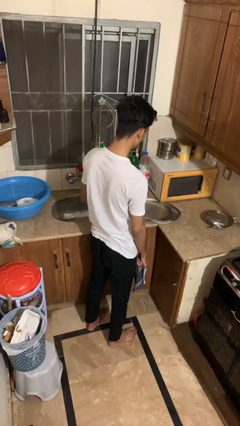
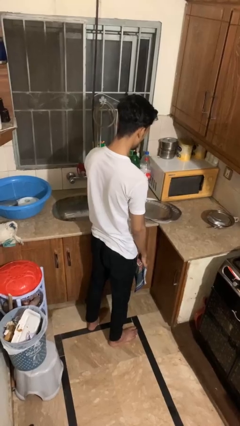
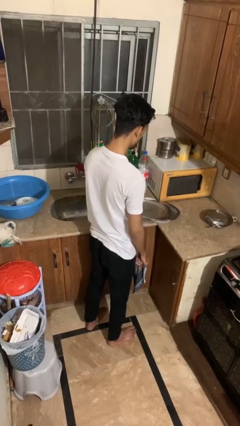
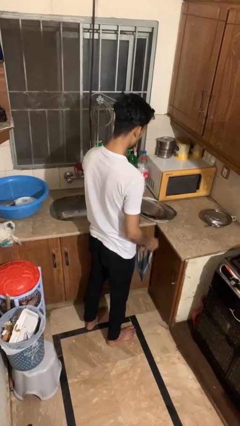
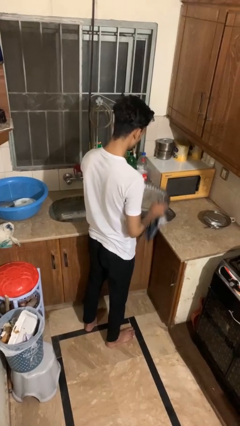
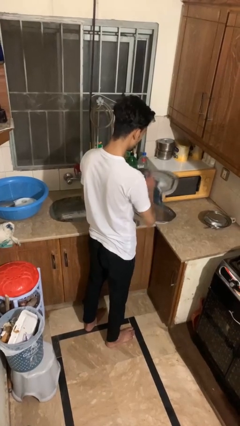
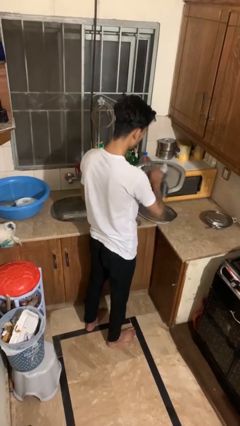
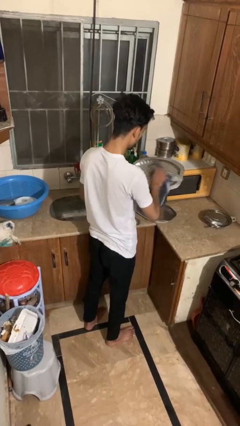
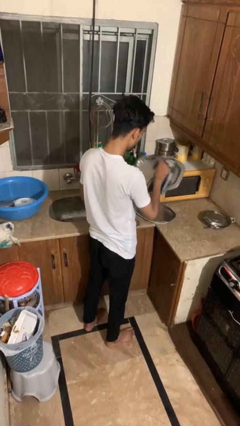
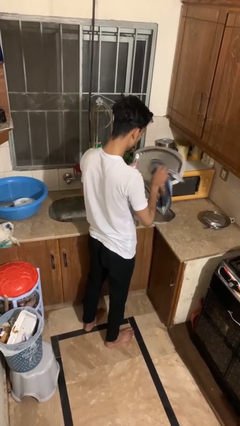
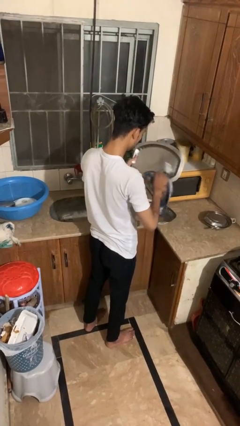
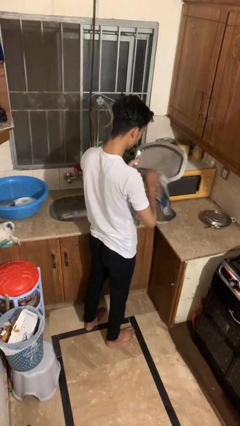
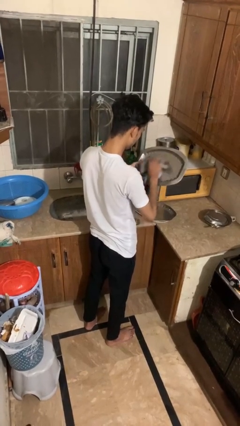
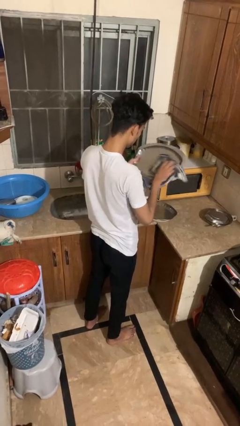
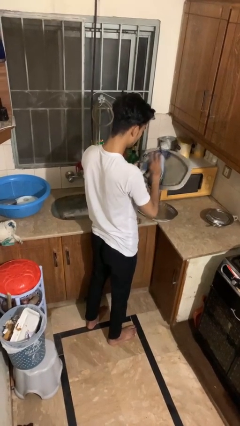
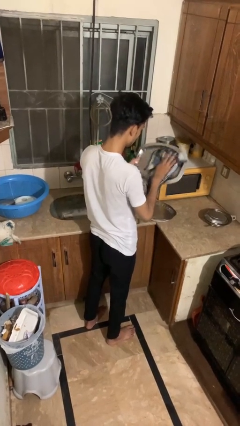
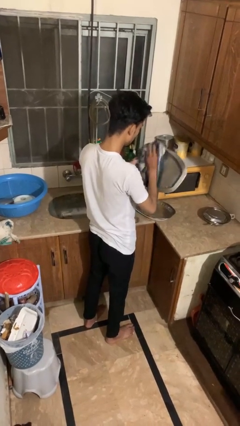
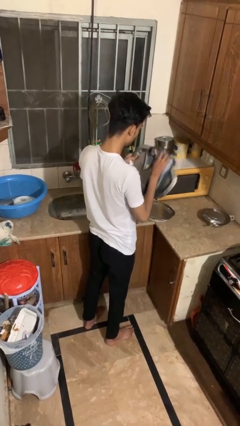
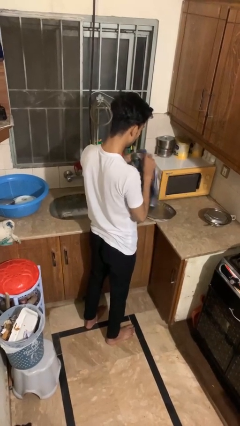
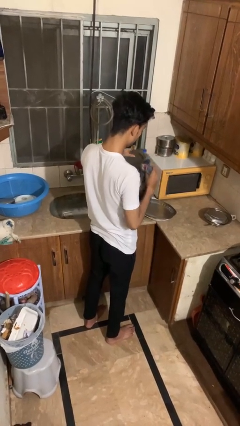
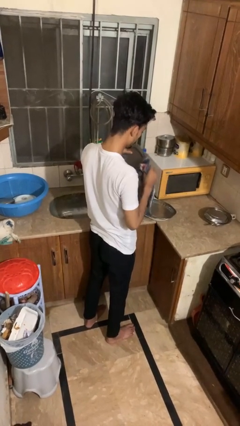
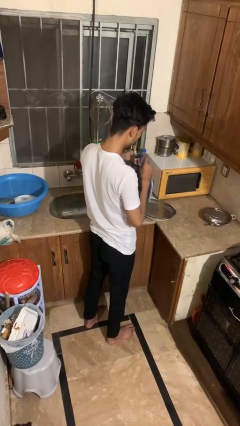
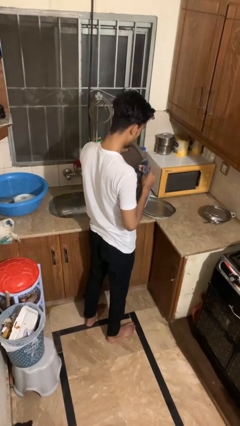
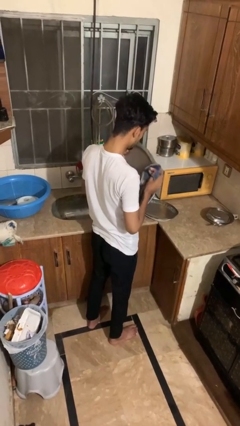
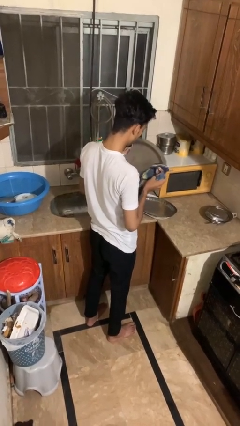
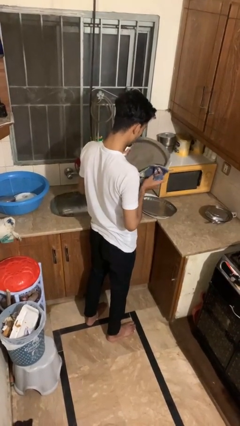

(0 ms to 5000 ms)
person dries dish

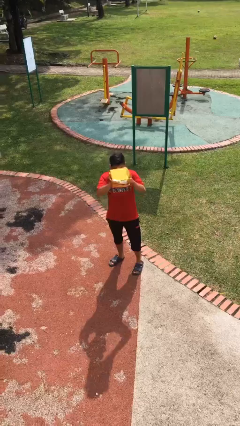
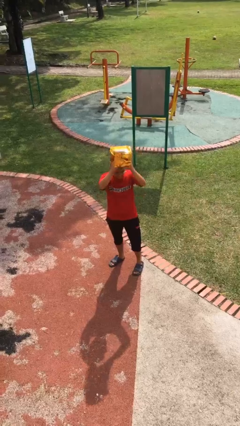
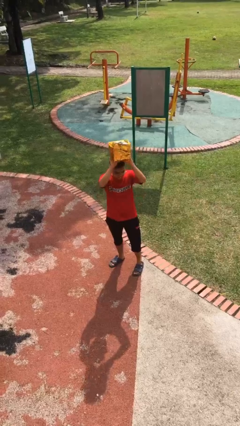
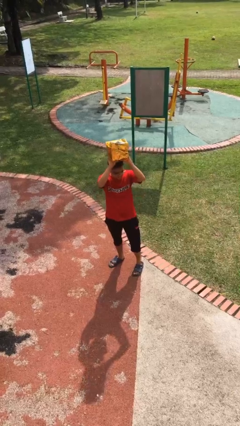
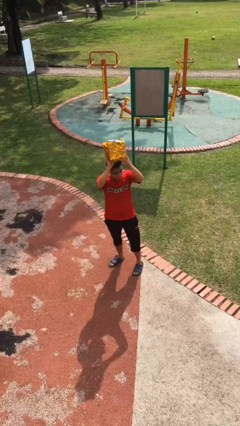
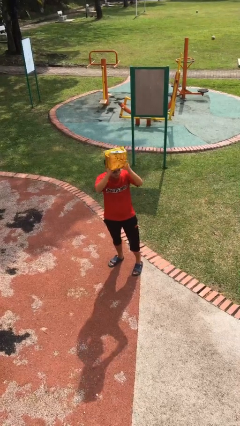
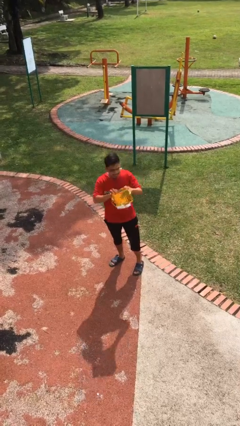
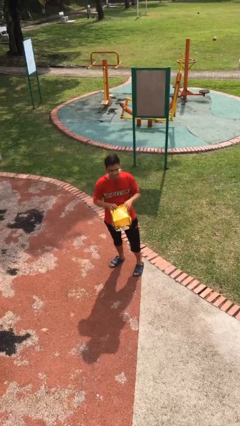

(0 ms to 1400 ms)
person holds object above head

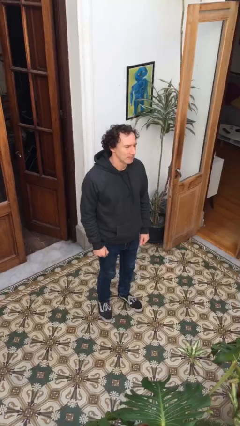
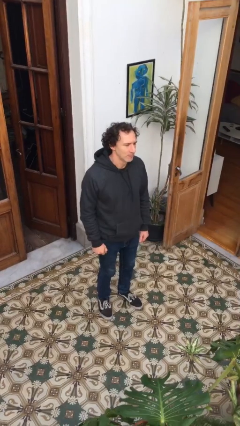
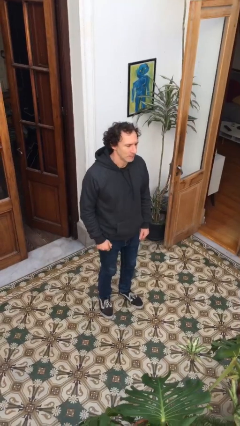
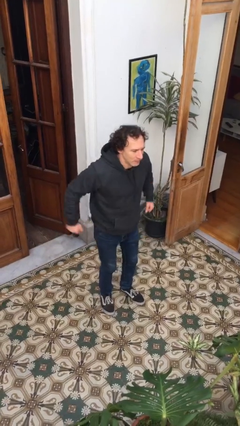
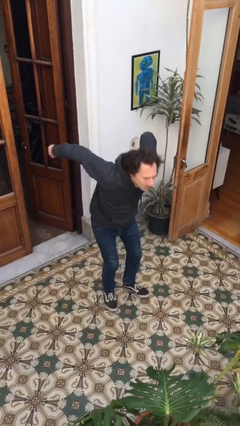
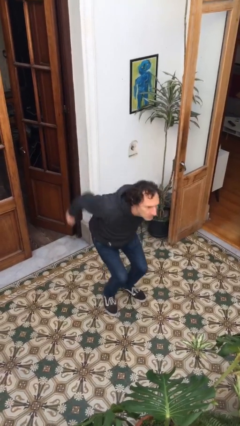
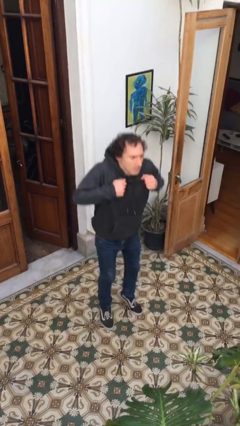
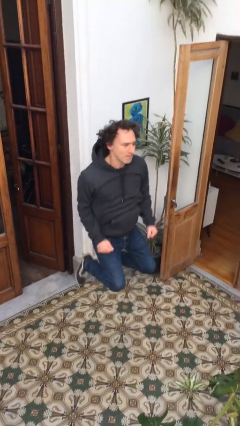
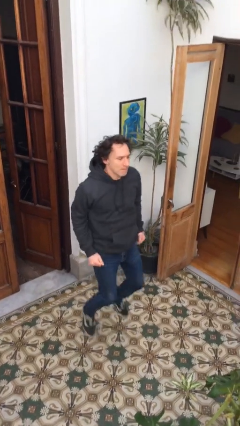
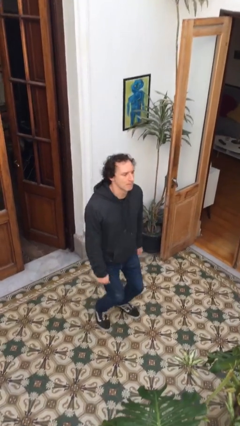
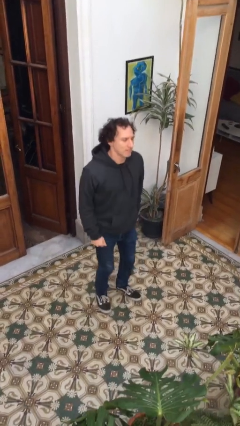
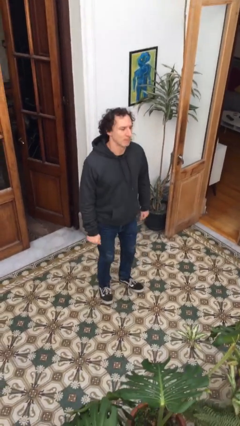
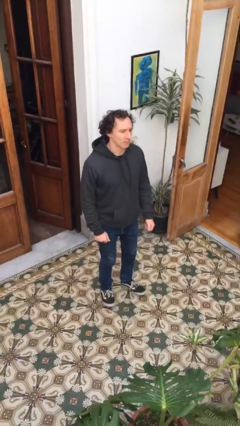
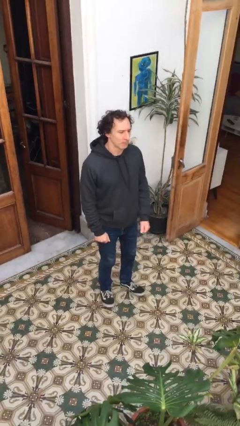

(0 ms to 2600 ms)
person jumps

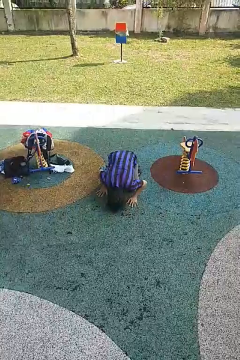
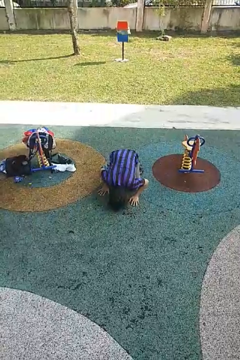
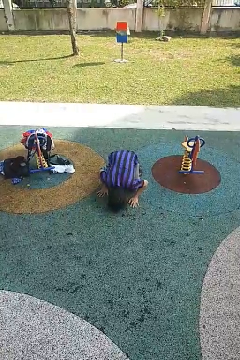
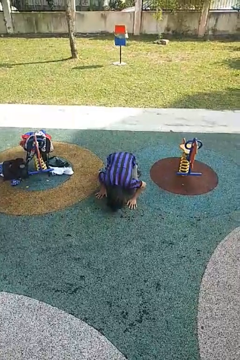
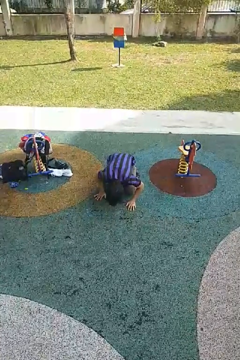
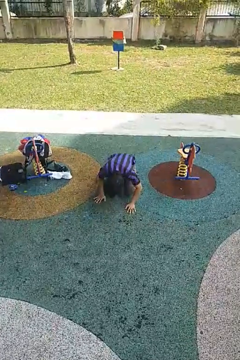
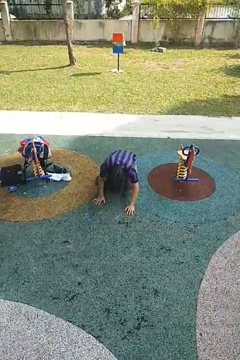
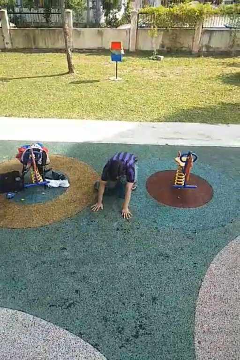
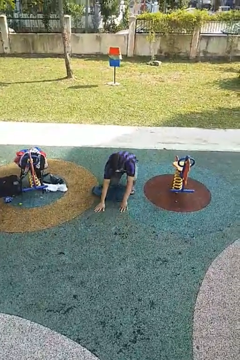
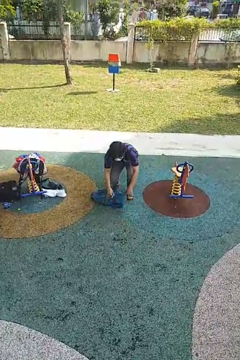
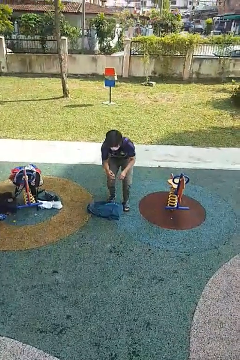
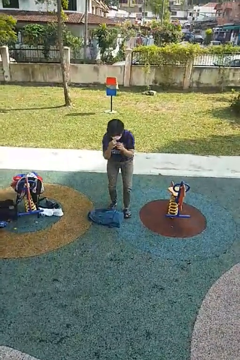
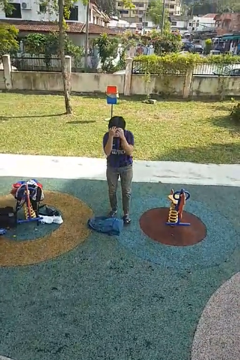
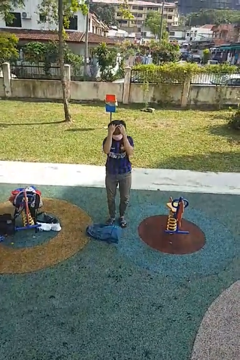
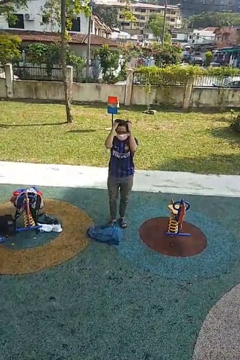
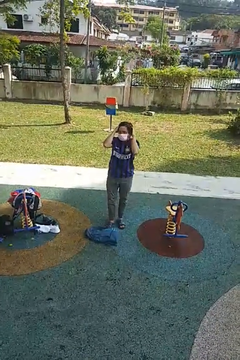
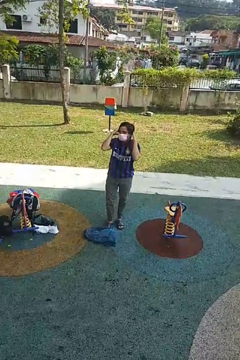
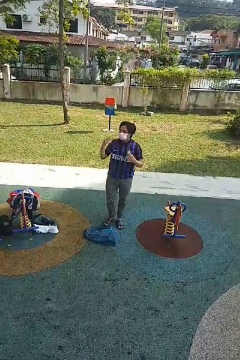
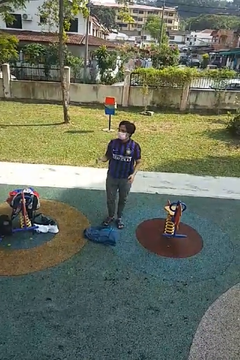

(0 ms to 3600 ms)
person stands up from floor

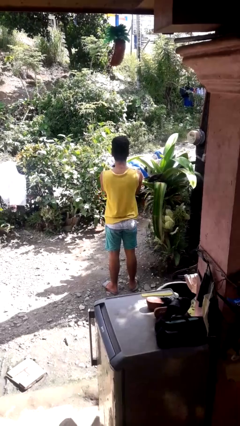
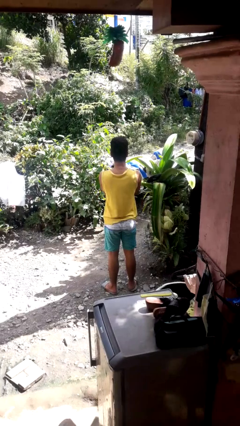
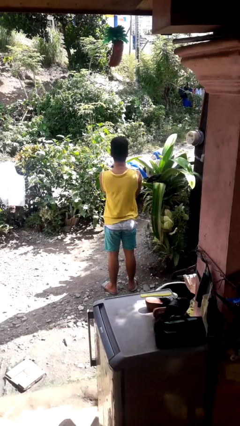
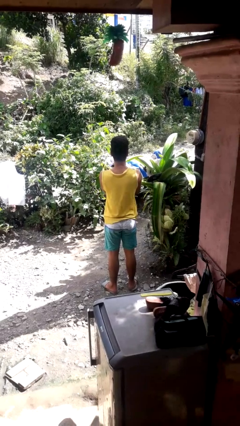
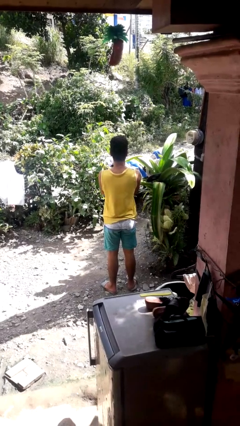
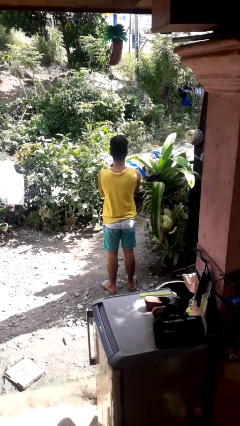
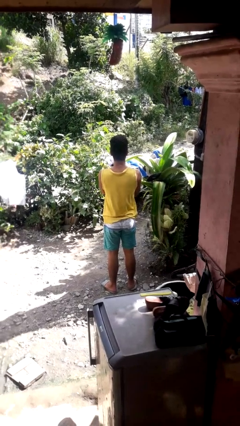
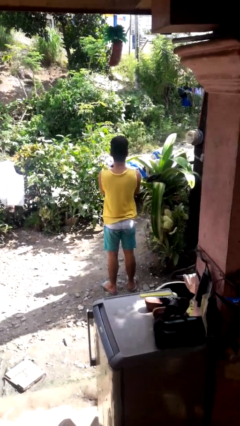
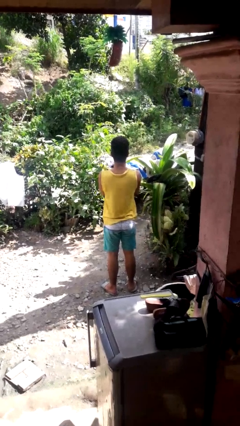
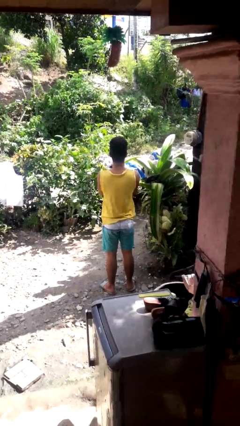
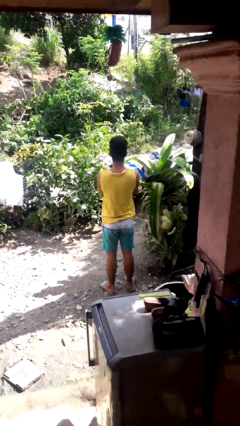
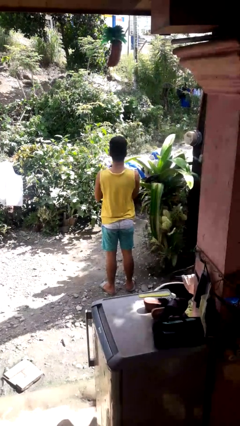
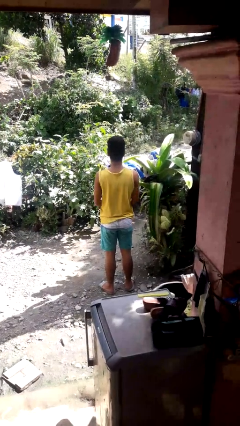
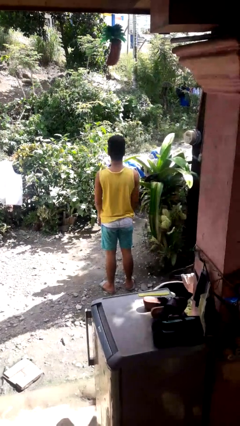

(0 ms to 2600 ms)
person blows into hands

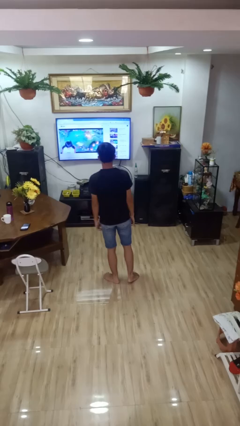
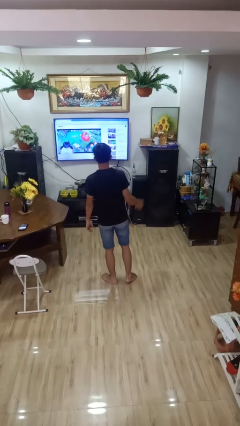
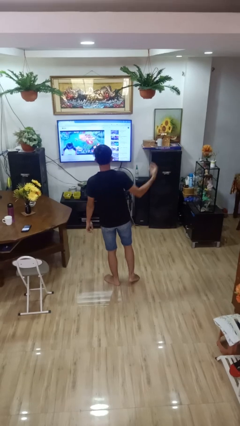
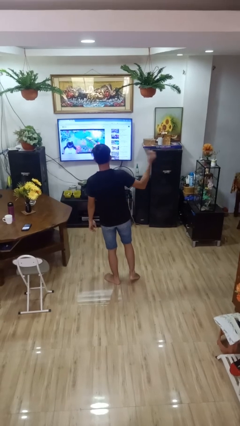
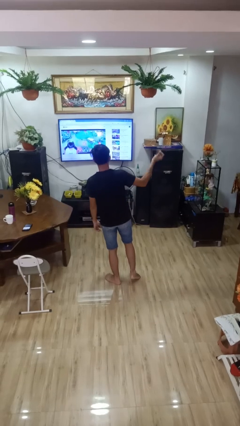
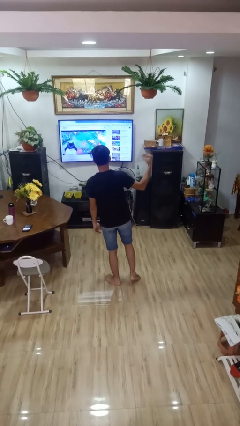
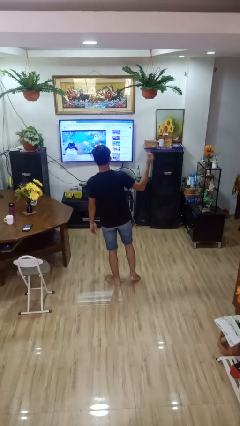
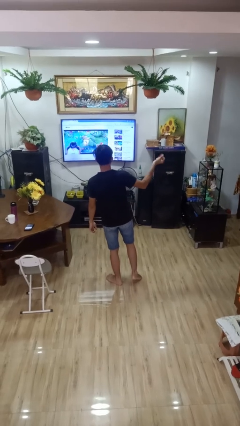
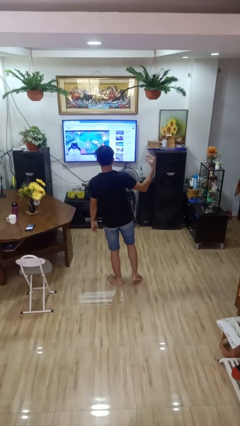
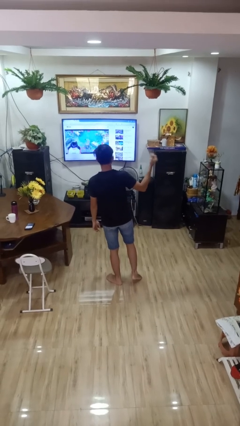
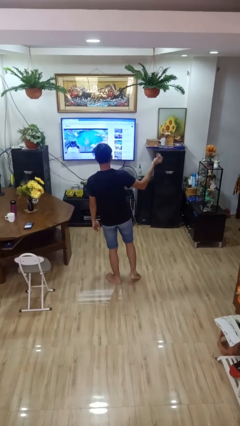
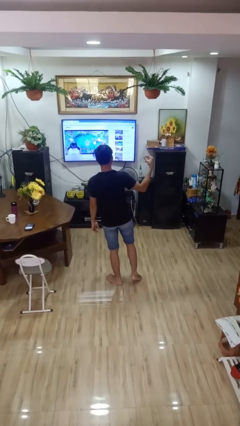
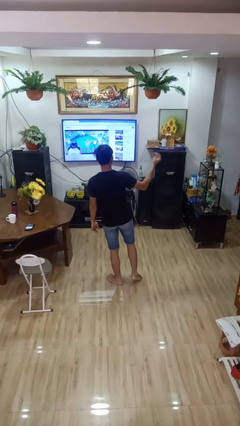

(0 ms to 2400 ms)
person snaps fingers

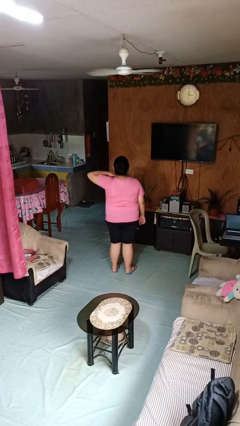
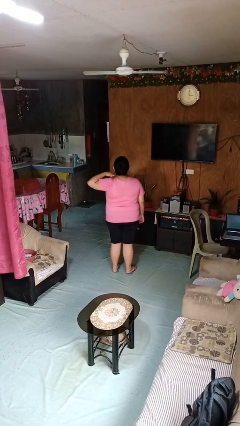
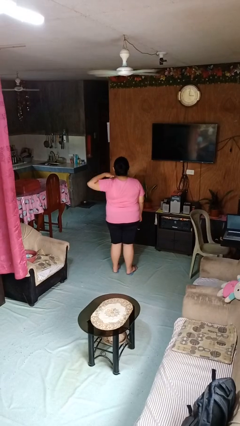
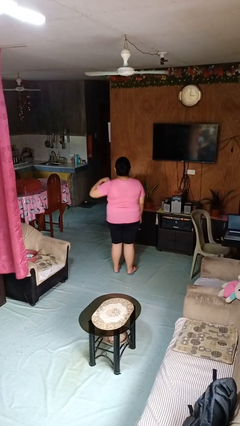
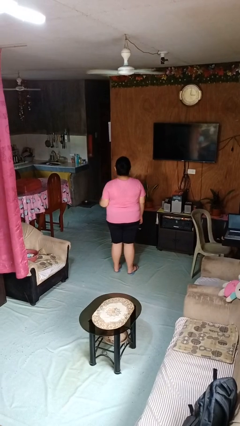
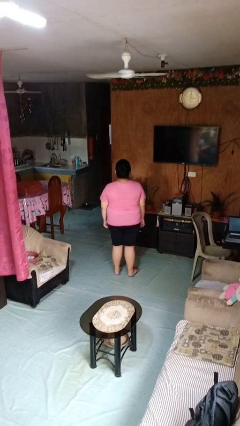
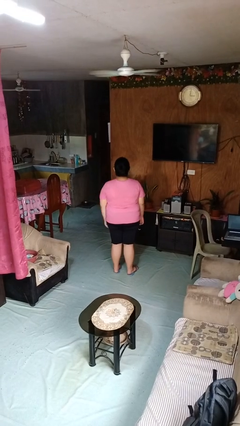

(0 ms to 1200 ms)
person gestures cut
